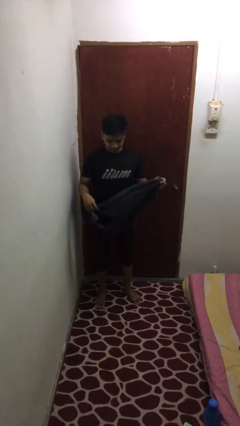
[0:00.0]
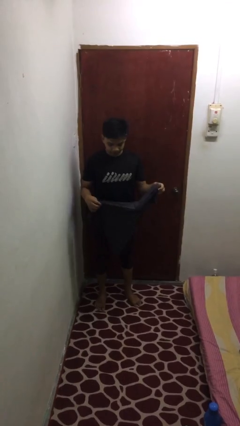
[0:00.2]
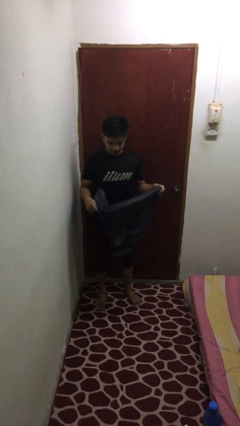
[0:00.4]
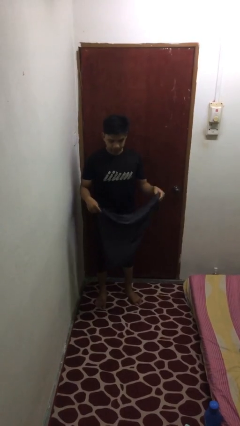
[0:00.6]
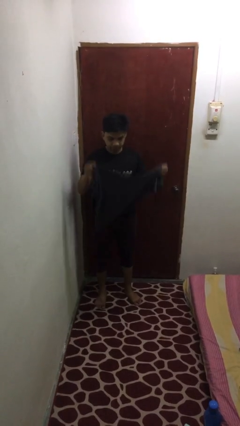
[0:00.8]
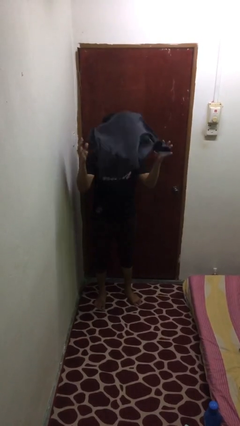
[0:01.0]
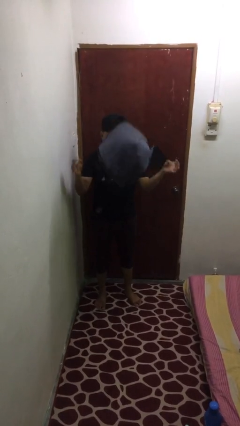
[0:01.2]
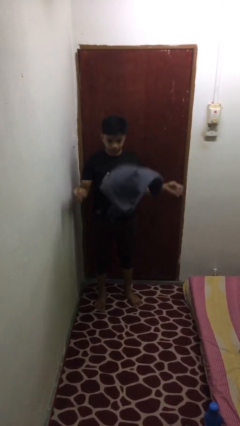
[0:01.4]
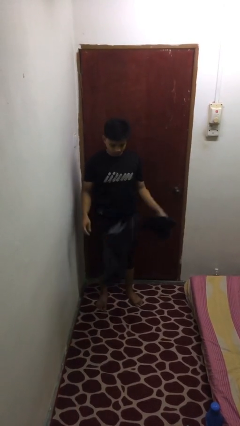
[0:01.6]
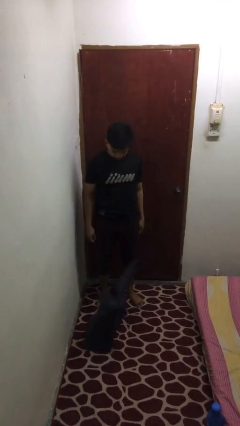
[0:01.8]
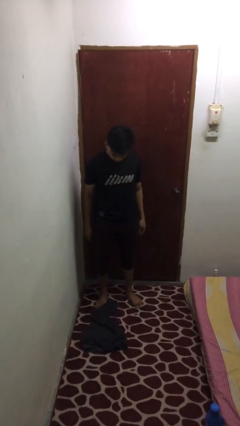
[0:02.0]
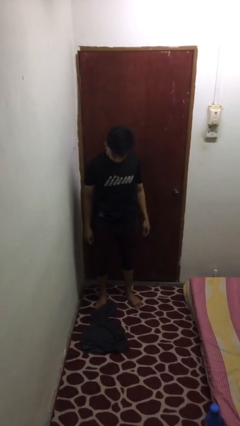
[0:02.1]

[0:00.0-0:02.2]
person throws object into air

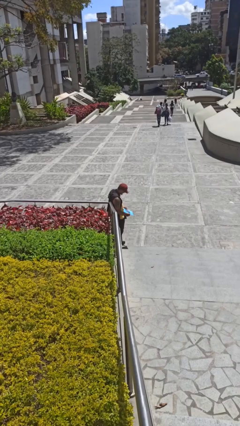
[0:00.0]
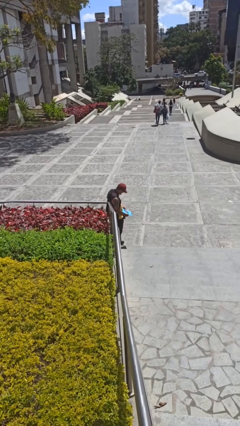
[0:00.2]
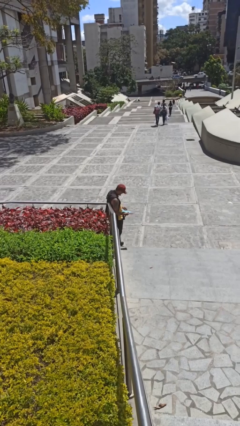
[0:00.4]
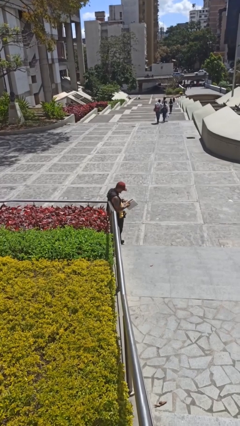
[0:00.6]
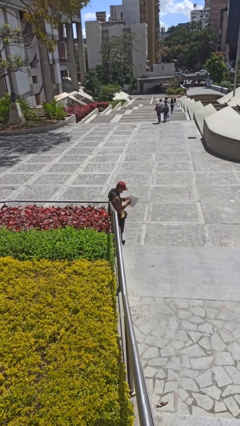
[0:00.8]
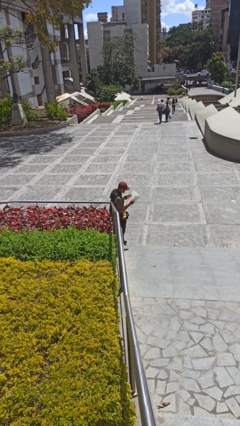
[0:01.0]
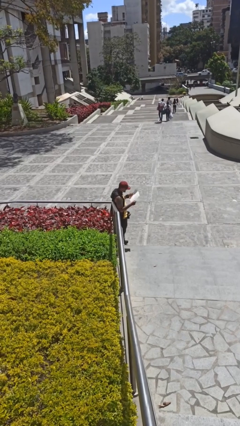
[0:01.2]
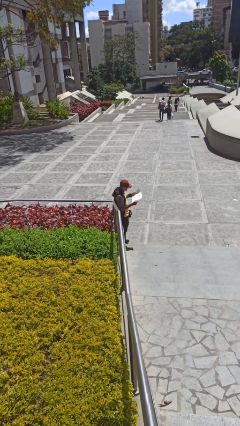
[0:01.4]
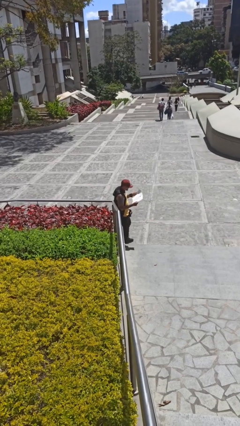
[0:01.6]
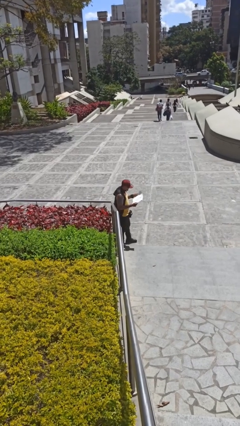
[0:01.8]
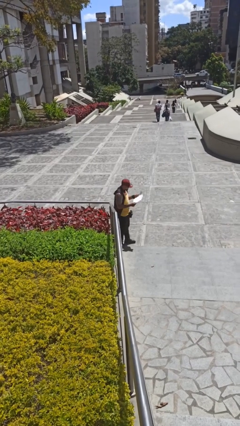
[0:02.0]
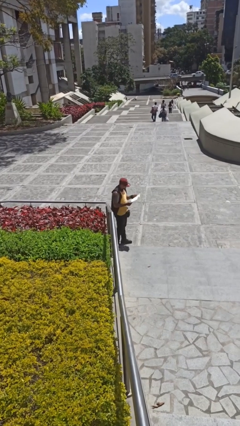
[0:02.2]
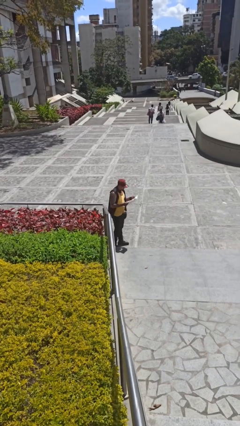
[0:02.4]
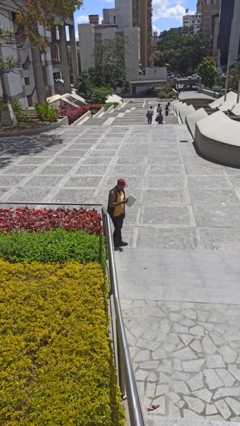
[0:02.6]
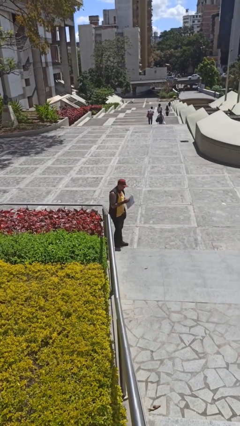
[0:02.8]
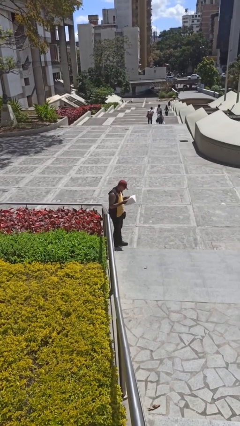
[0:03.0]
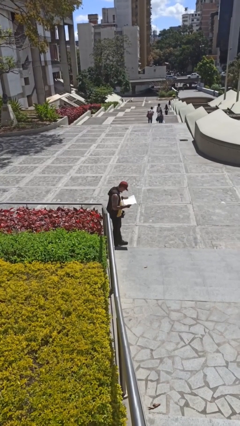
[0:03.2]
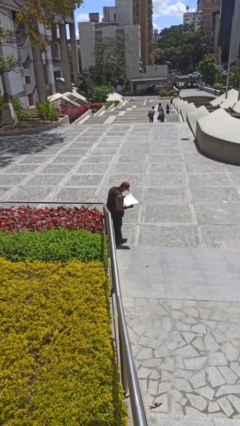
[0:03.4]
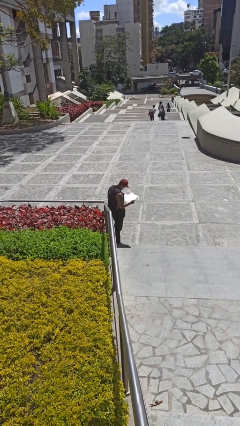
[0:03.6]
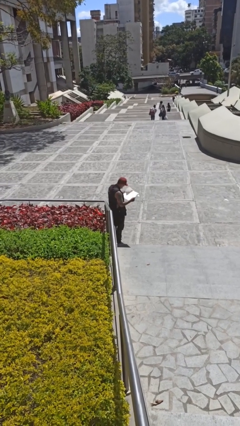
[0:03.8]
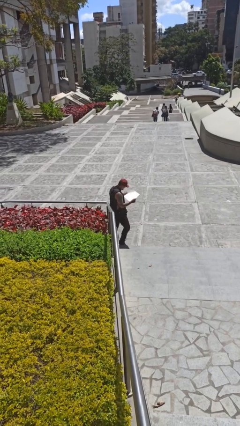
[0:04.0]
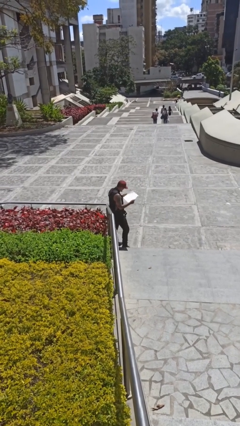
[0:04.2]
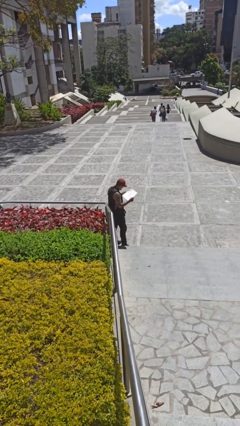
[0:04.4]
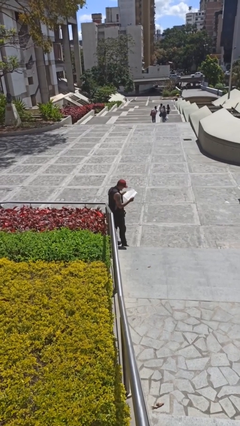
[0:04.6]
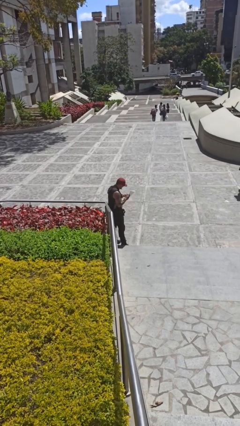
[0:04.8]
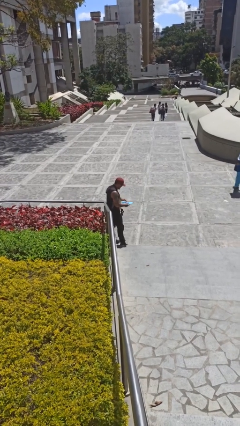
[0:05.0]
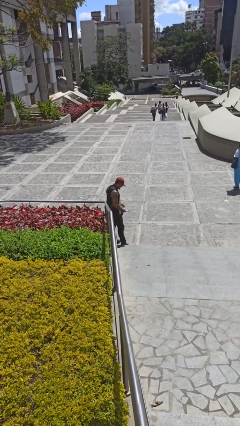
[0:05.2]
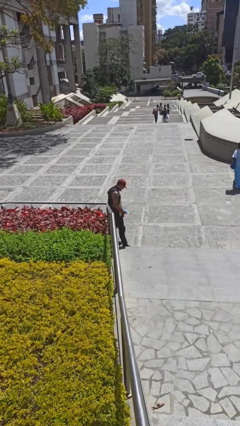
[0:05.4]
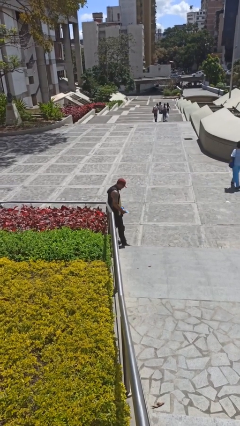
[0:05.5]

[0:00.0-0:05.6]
person reads document

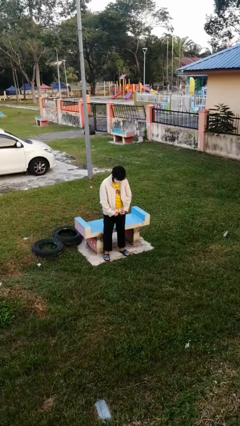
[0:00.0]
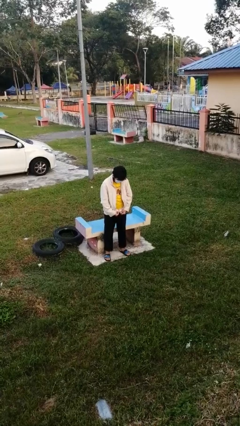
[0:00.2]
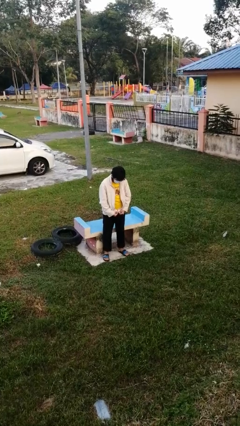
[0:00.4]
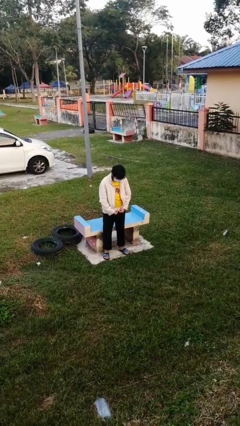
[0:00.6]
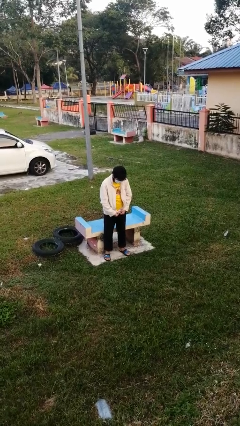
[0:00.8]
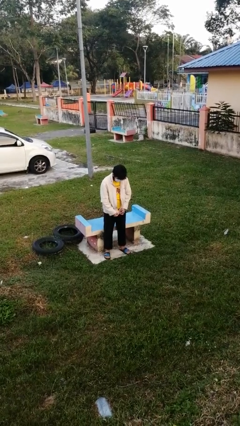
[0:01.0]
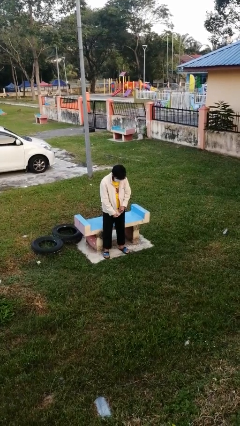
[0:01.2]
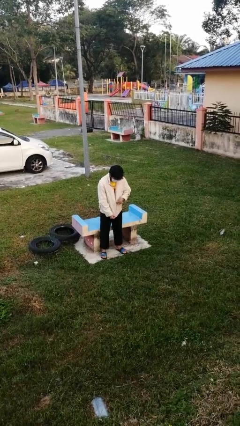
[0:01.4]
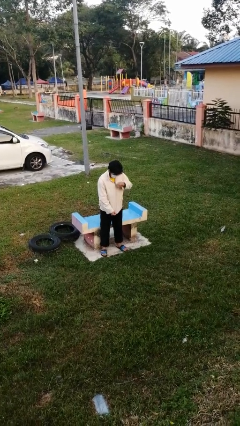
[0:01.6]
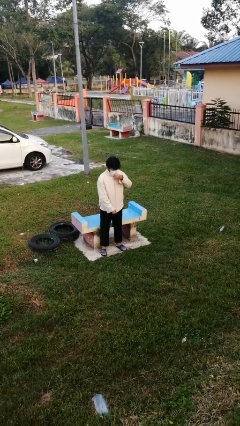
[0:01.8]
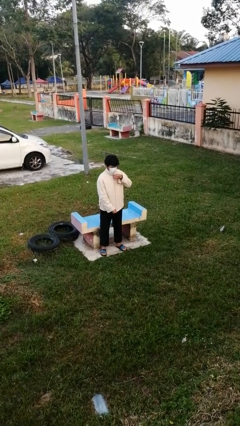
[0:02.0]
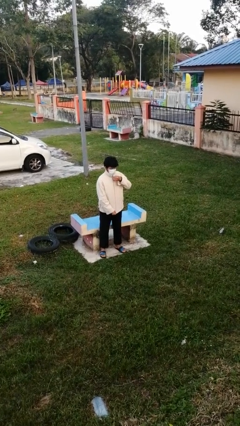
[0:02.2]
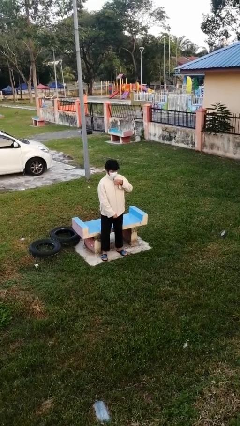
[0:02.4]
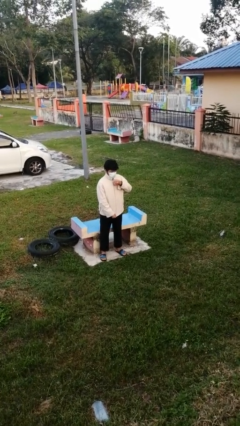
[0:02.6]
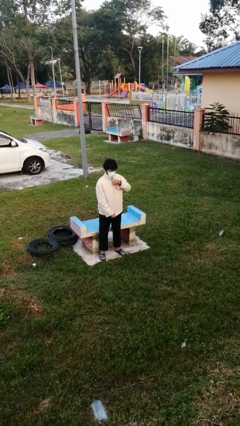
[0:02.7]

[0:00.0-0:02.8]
person zips up jacket

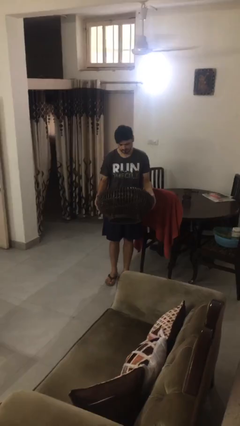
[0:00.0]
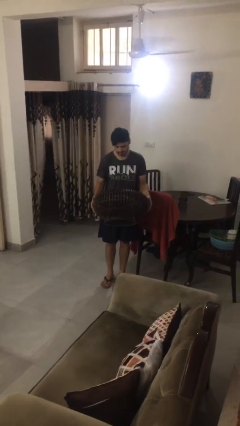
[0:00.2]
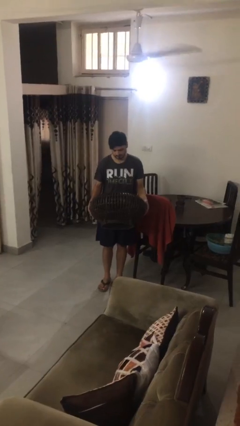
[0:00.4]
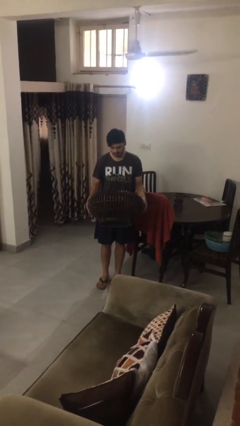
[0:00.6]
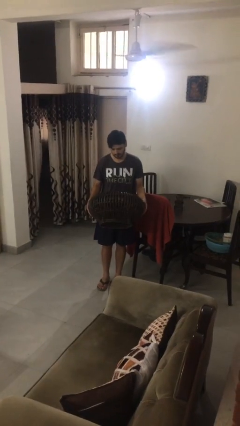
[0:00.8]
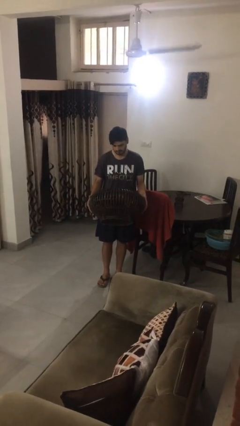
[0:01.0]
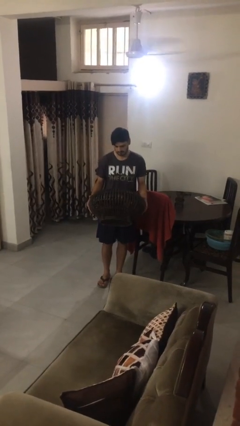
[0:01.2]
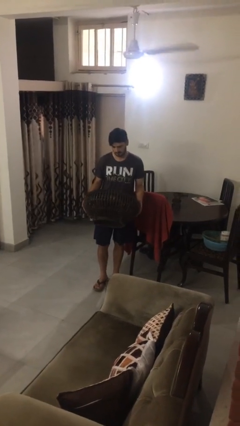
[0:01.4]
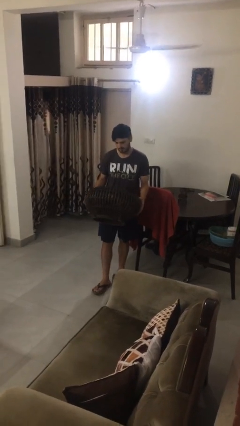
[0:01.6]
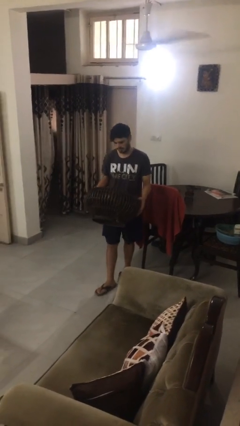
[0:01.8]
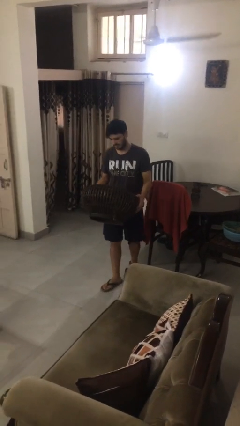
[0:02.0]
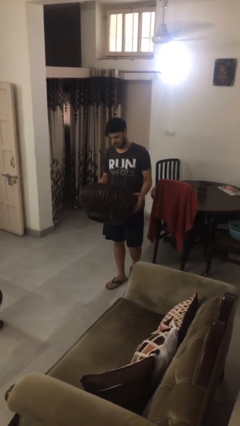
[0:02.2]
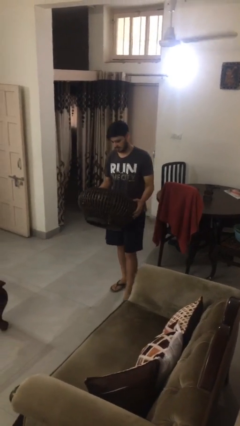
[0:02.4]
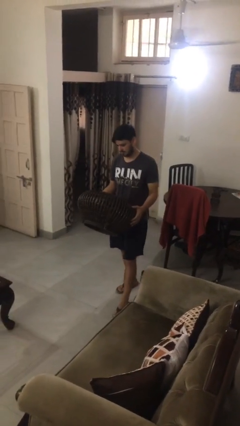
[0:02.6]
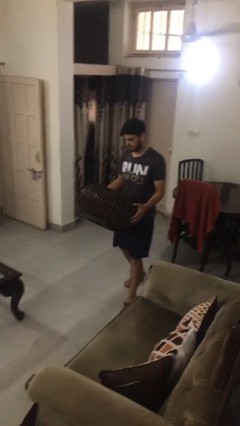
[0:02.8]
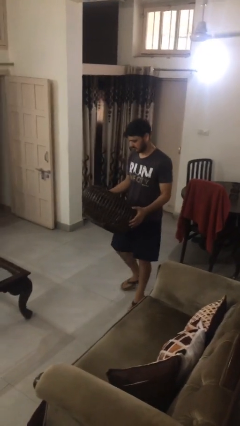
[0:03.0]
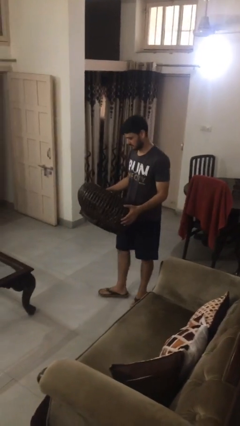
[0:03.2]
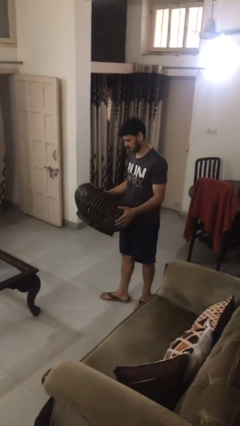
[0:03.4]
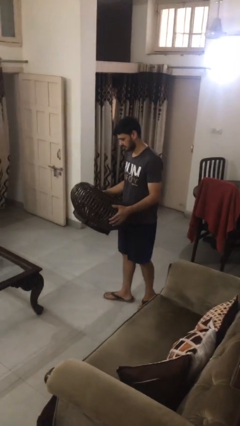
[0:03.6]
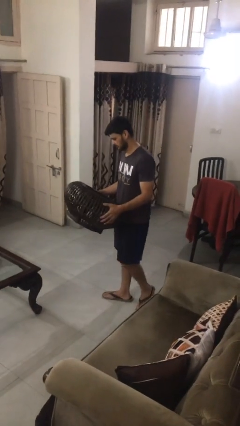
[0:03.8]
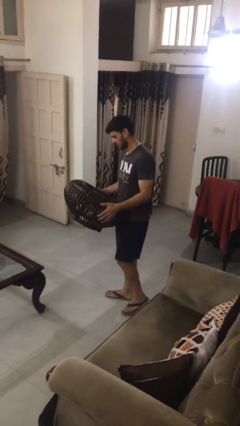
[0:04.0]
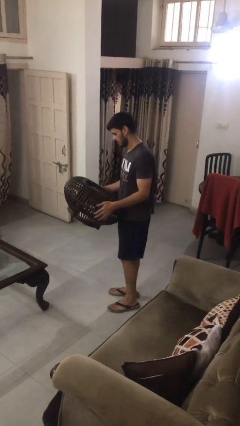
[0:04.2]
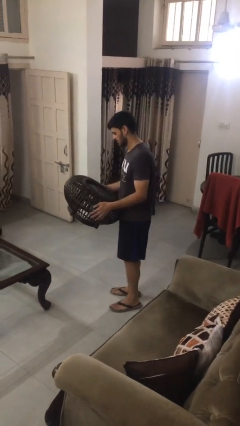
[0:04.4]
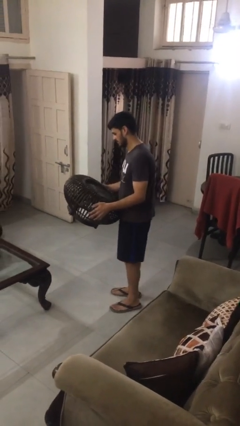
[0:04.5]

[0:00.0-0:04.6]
person carries furniture

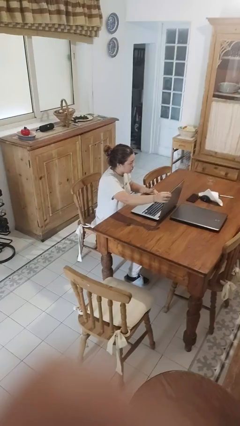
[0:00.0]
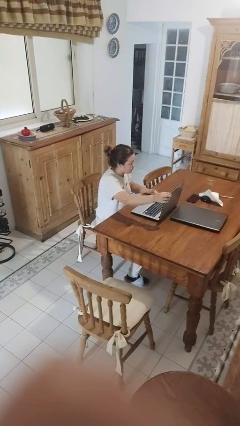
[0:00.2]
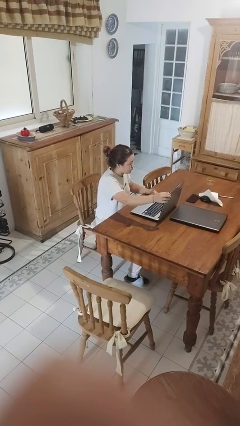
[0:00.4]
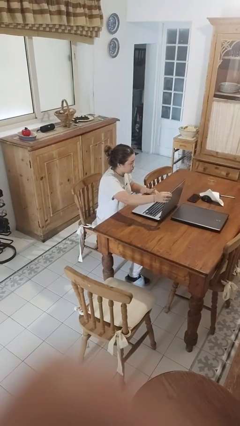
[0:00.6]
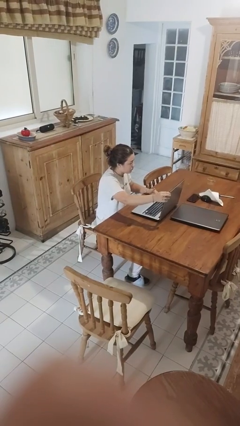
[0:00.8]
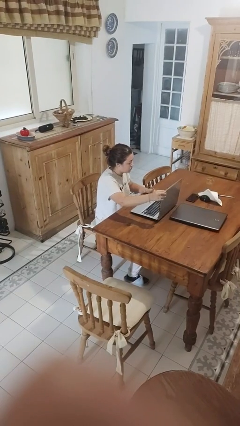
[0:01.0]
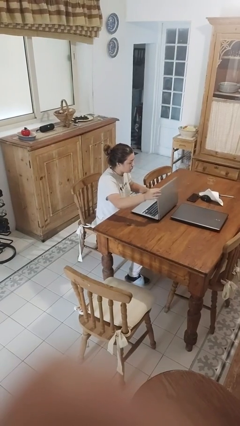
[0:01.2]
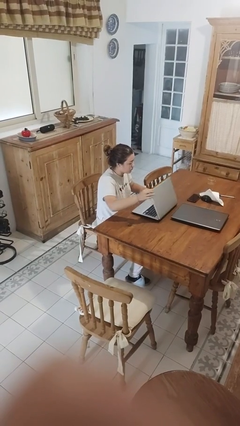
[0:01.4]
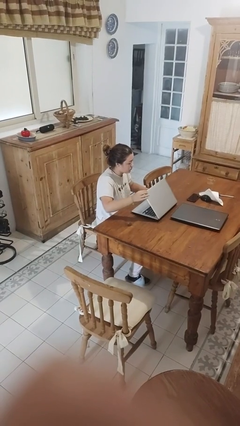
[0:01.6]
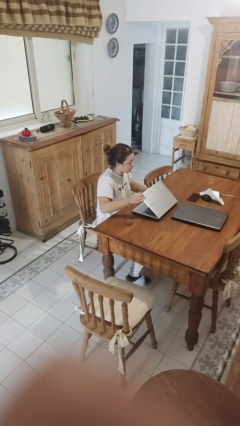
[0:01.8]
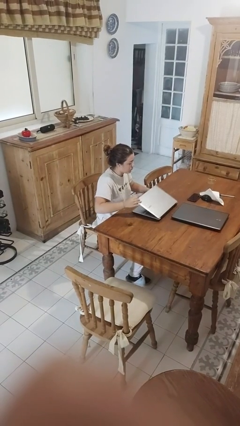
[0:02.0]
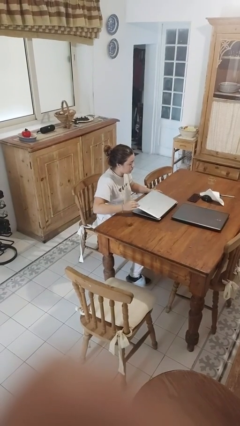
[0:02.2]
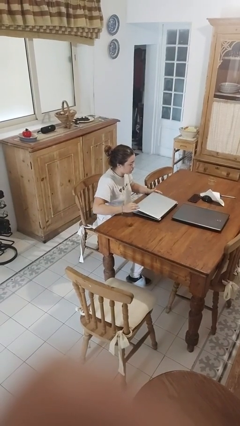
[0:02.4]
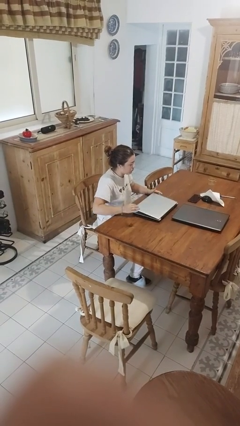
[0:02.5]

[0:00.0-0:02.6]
person closes laptop
